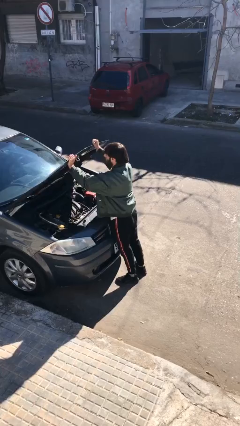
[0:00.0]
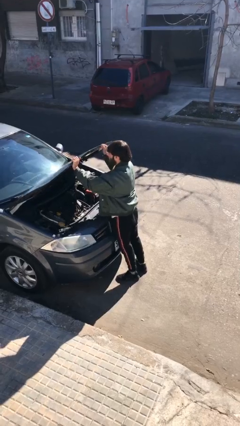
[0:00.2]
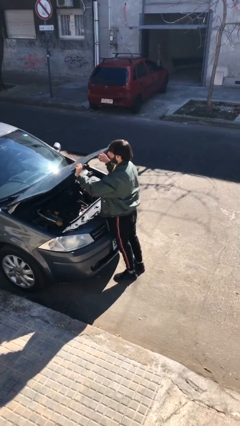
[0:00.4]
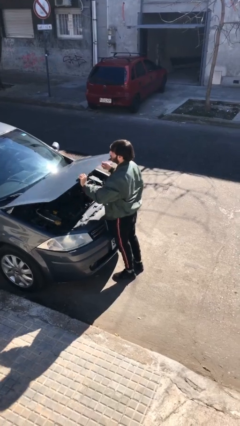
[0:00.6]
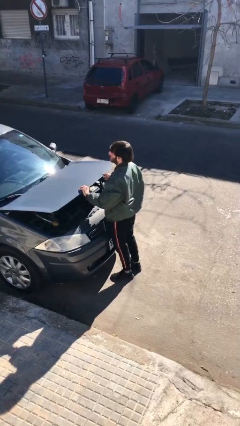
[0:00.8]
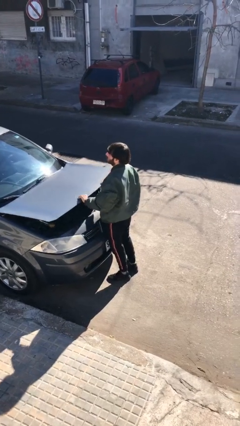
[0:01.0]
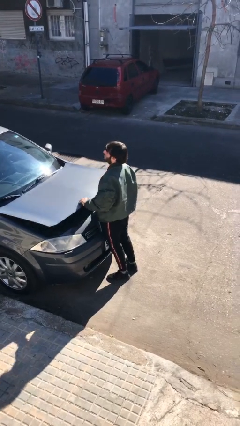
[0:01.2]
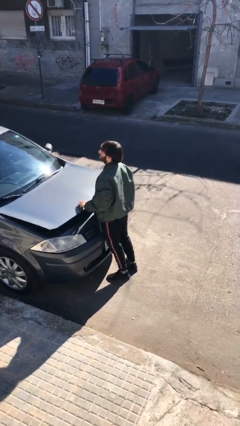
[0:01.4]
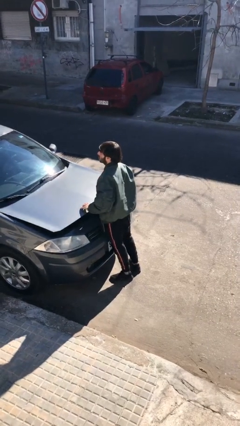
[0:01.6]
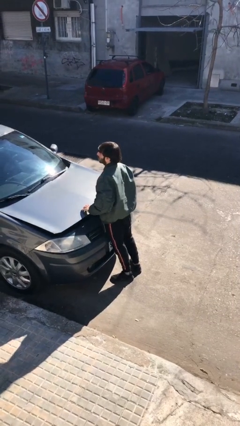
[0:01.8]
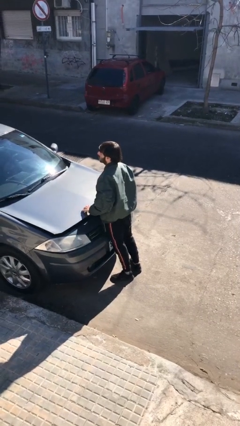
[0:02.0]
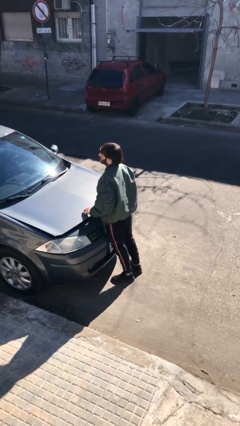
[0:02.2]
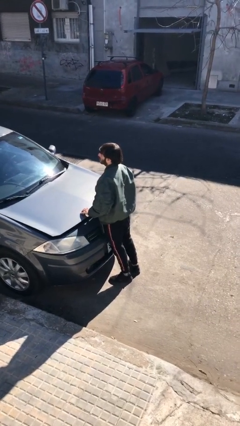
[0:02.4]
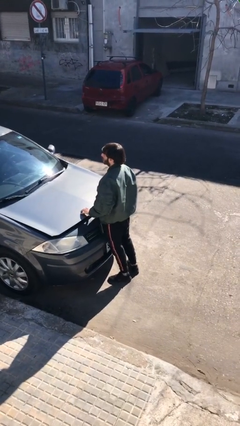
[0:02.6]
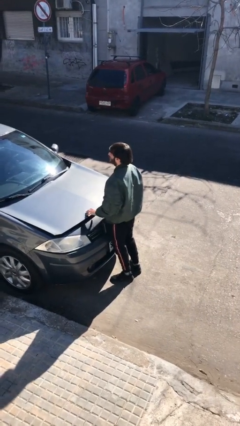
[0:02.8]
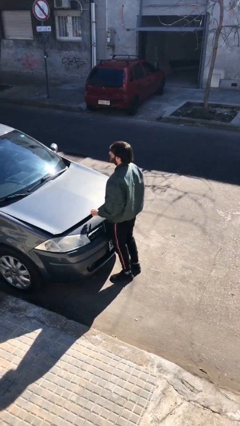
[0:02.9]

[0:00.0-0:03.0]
person closes car hood

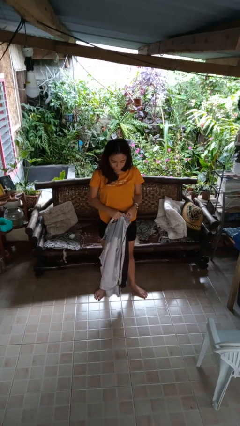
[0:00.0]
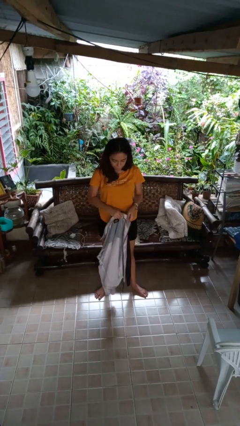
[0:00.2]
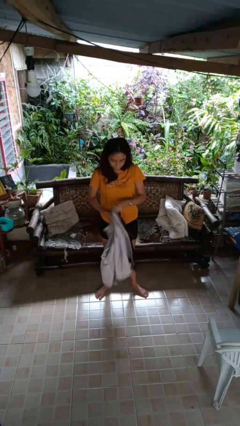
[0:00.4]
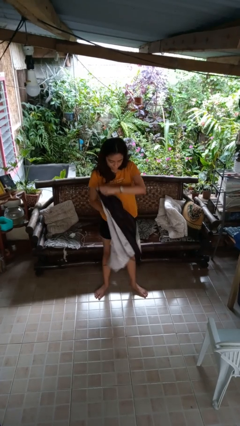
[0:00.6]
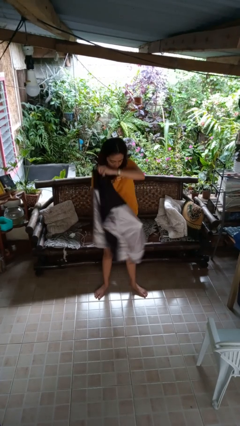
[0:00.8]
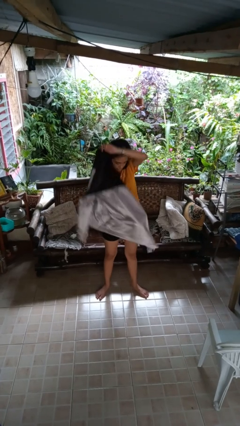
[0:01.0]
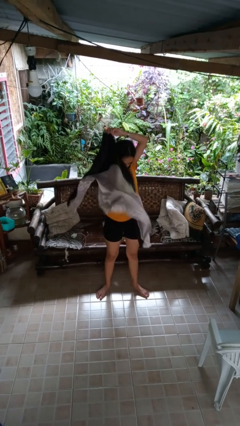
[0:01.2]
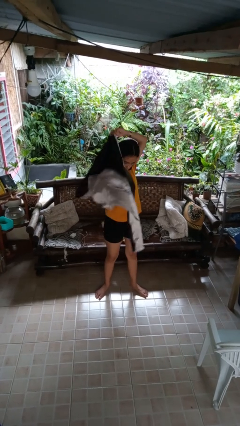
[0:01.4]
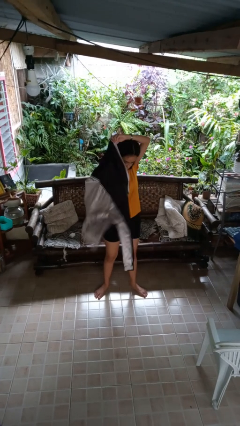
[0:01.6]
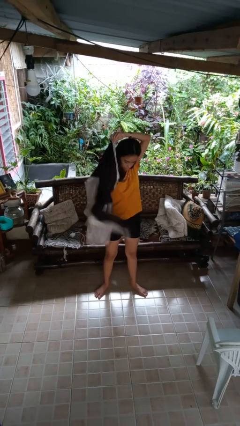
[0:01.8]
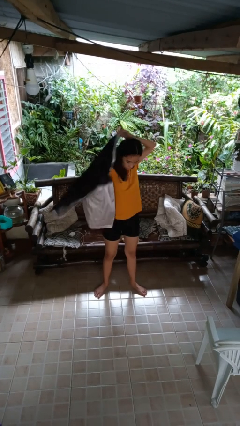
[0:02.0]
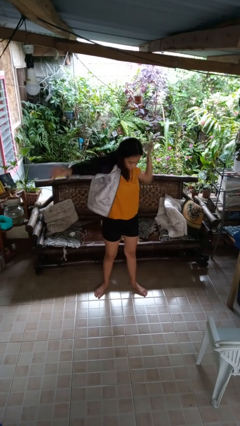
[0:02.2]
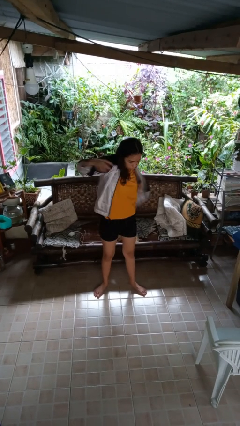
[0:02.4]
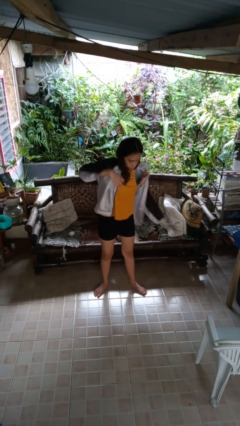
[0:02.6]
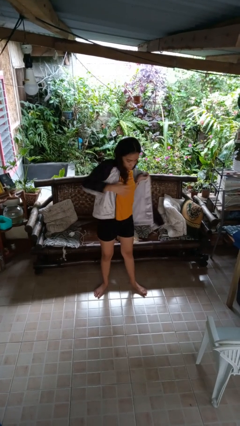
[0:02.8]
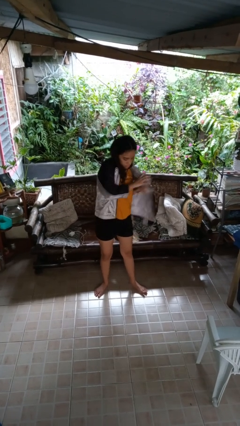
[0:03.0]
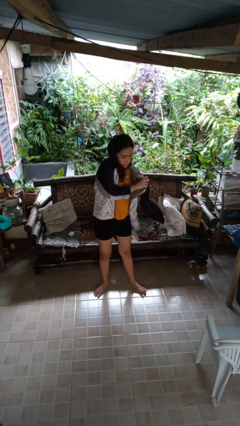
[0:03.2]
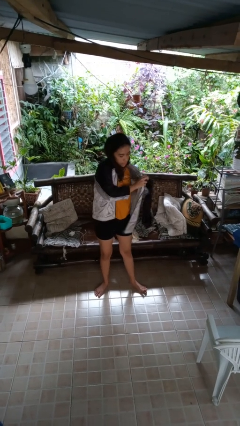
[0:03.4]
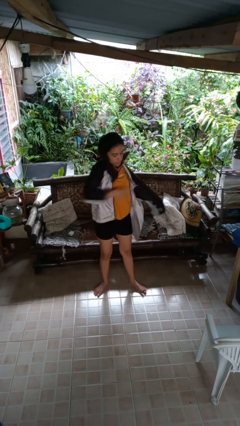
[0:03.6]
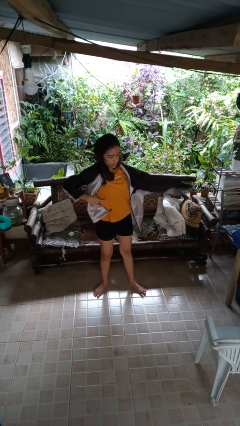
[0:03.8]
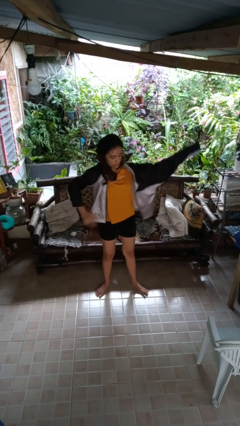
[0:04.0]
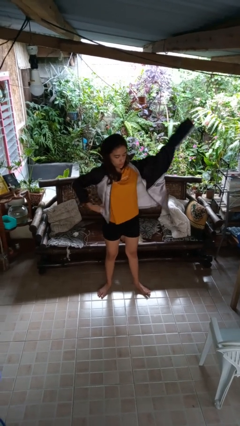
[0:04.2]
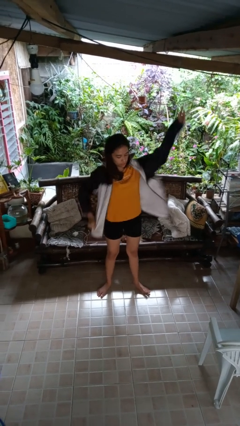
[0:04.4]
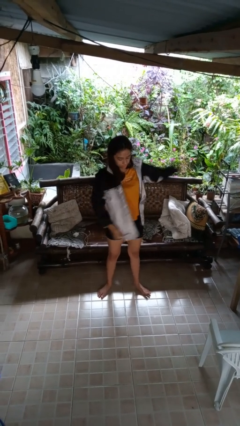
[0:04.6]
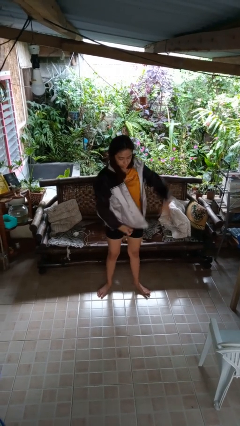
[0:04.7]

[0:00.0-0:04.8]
person puts on jacket

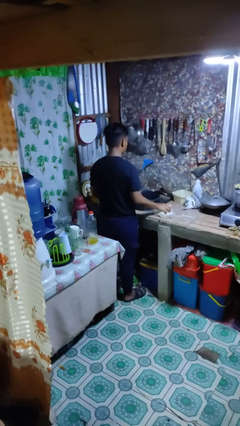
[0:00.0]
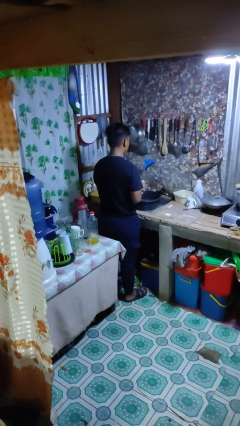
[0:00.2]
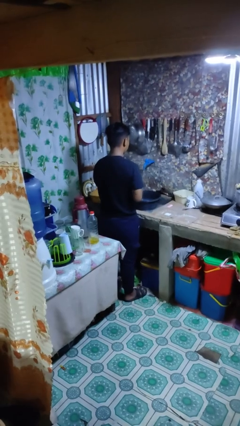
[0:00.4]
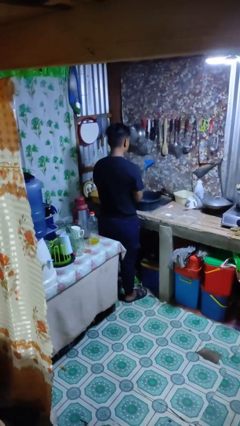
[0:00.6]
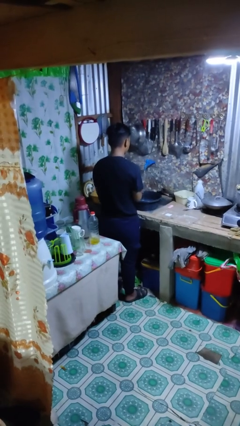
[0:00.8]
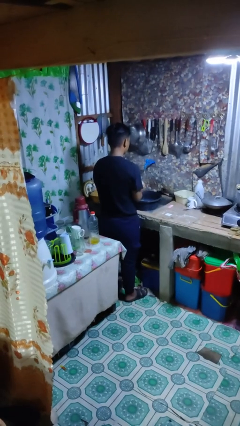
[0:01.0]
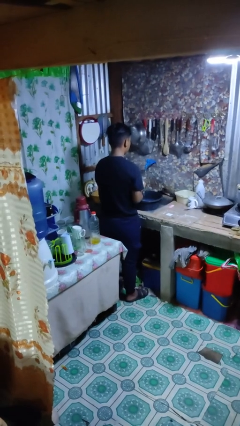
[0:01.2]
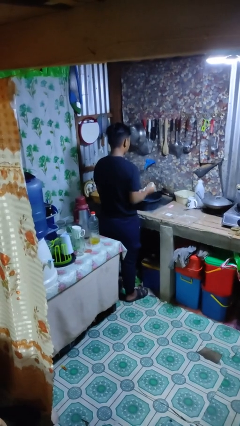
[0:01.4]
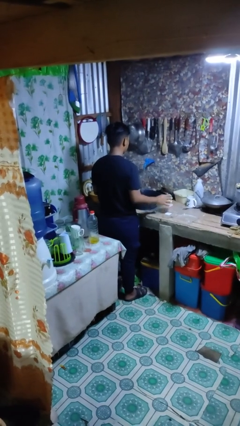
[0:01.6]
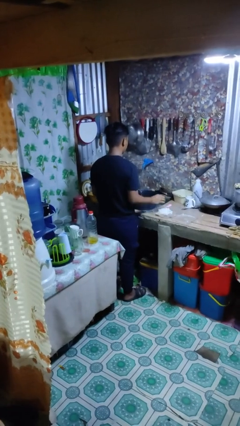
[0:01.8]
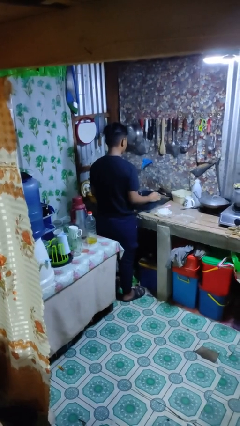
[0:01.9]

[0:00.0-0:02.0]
person dries hands with towel

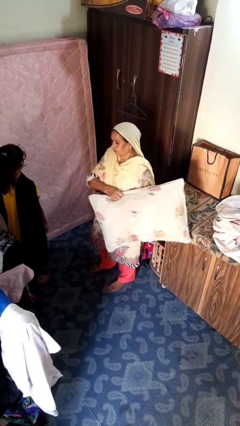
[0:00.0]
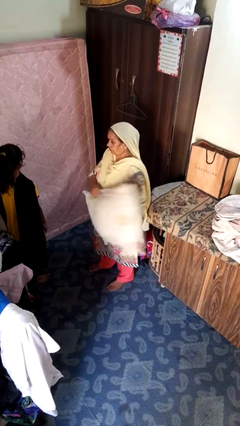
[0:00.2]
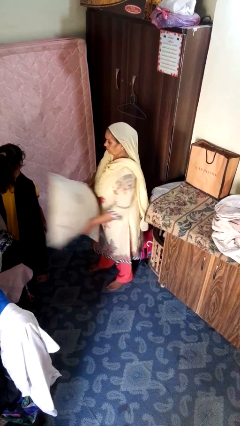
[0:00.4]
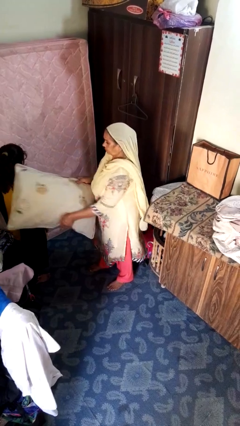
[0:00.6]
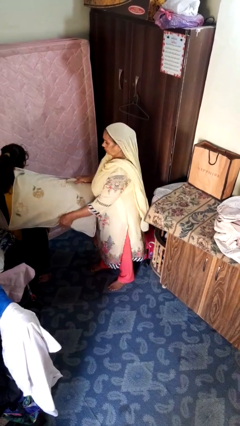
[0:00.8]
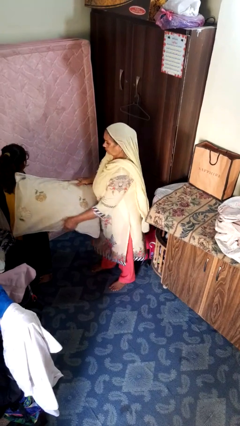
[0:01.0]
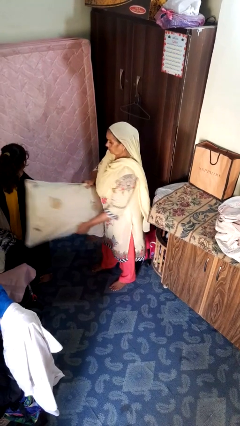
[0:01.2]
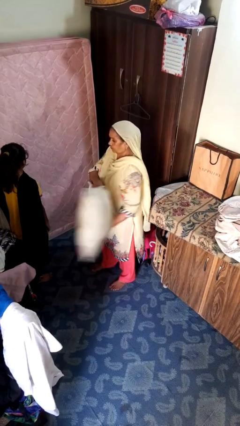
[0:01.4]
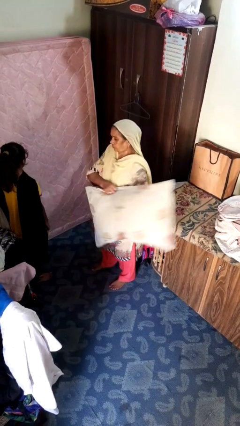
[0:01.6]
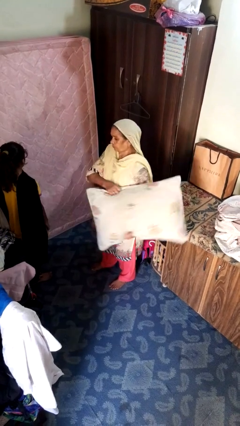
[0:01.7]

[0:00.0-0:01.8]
person hits person with pillow

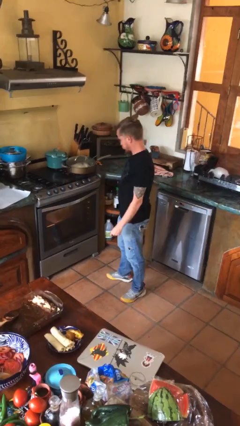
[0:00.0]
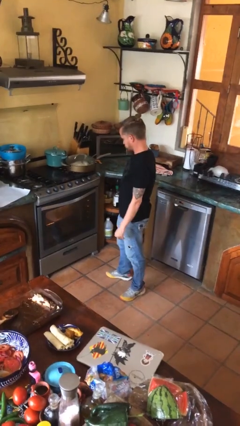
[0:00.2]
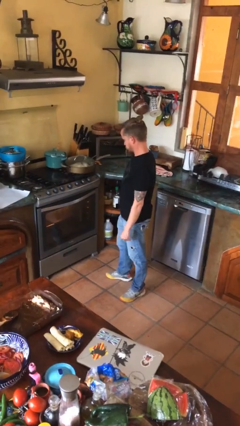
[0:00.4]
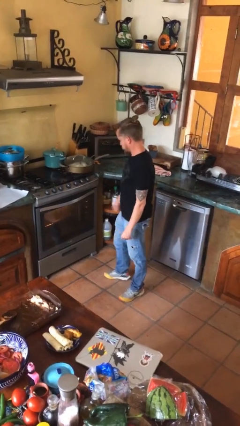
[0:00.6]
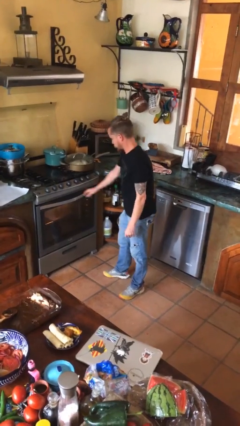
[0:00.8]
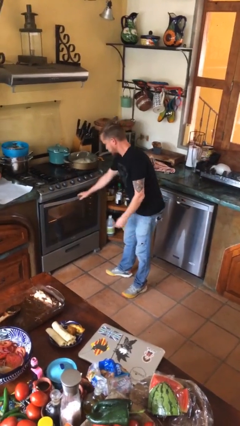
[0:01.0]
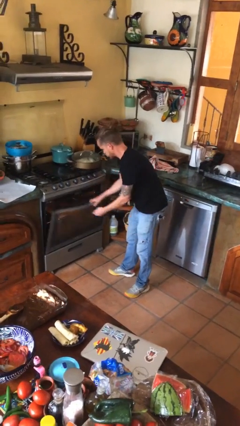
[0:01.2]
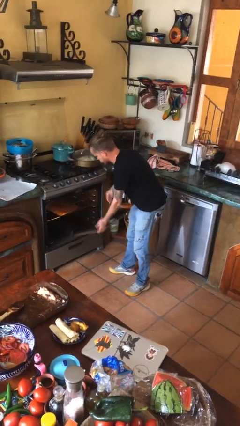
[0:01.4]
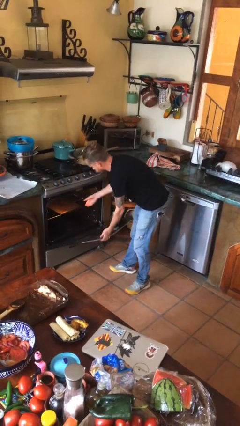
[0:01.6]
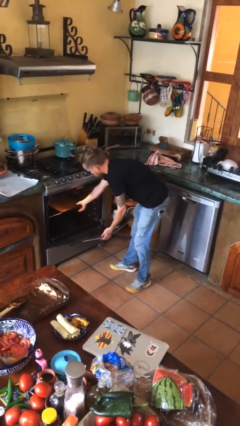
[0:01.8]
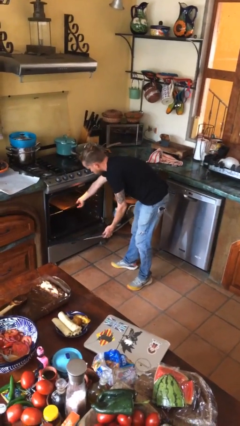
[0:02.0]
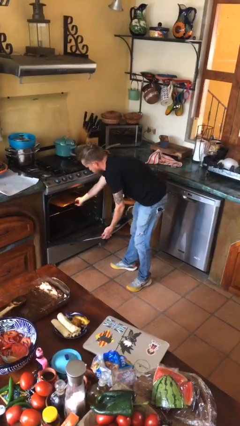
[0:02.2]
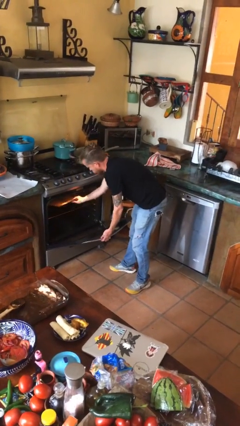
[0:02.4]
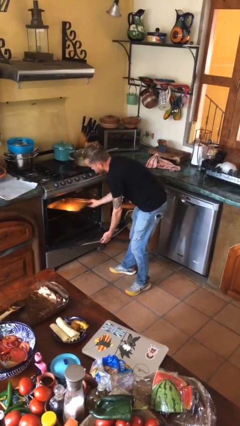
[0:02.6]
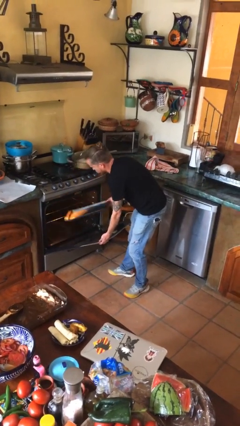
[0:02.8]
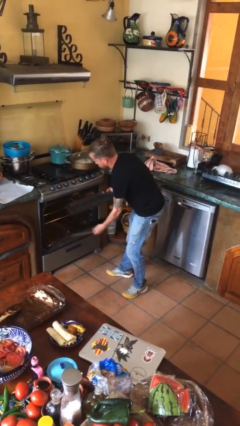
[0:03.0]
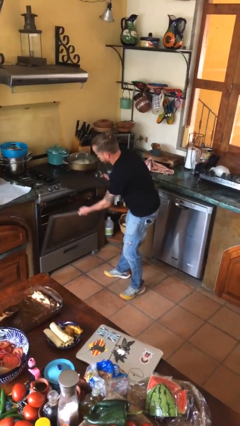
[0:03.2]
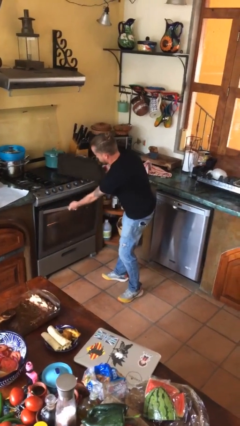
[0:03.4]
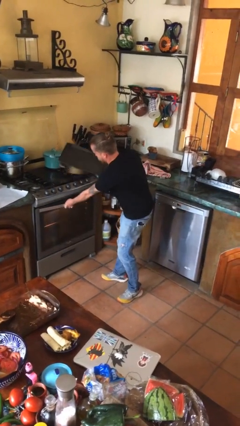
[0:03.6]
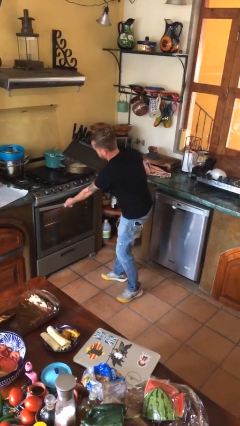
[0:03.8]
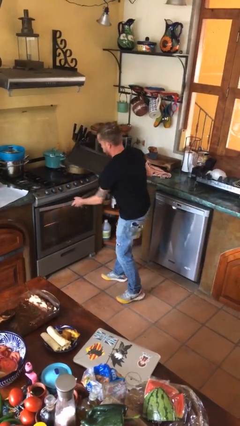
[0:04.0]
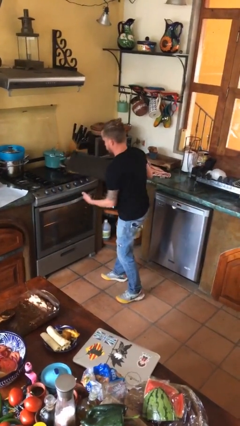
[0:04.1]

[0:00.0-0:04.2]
person takes object from oven

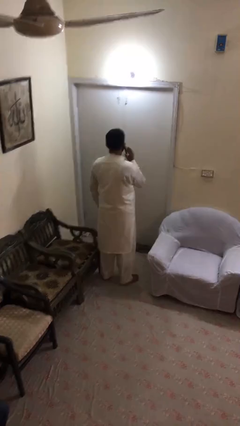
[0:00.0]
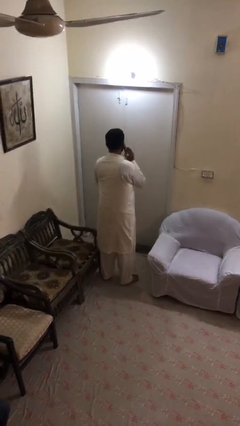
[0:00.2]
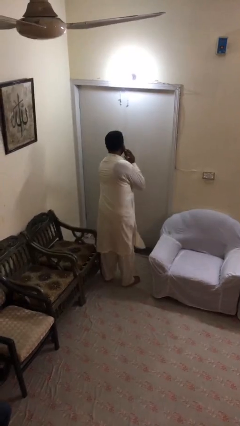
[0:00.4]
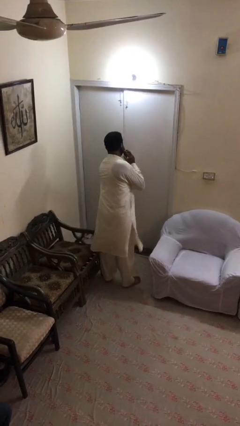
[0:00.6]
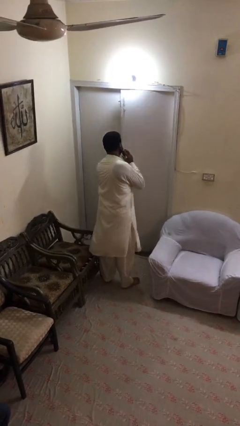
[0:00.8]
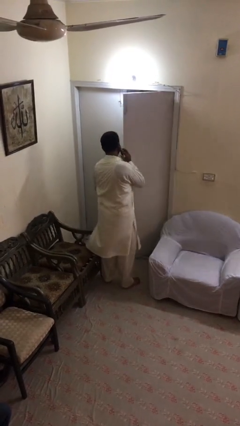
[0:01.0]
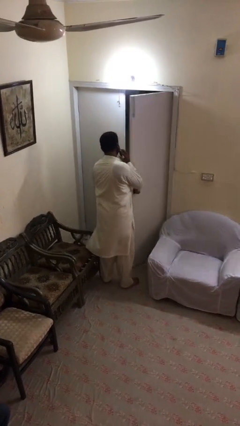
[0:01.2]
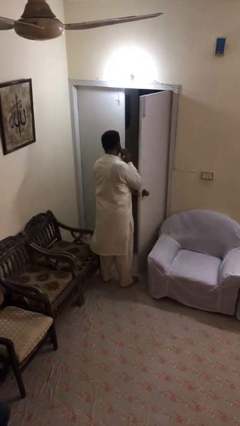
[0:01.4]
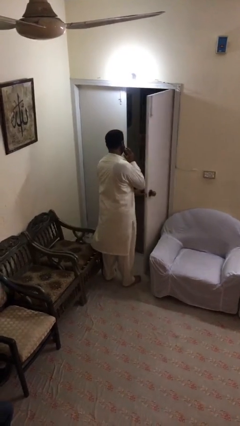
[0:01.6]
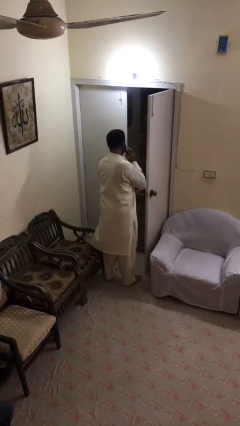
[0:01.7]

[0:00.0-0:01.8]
person opens facility door
